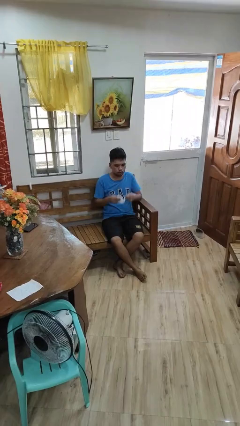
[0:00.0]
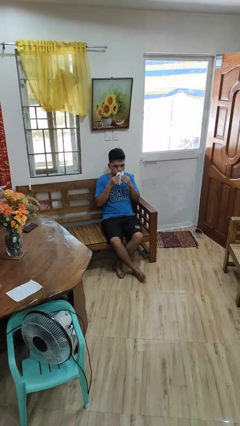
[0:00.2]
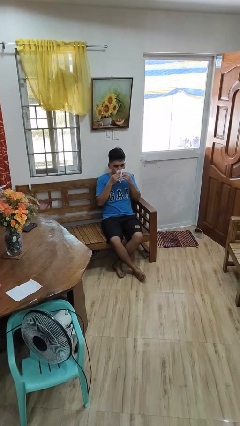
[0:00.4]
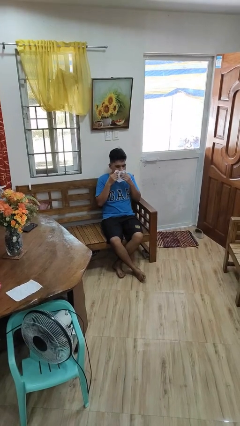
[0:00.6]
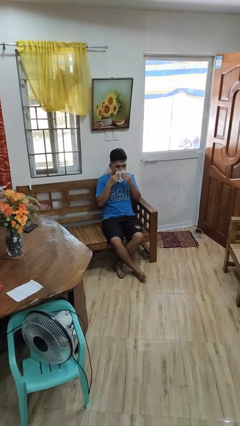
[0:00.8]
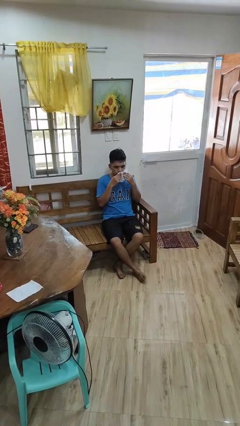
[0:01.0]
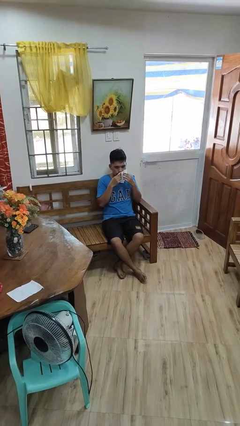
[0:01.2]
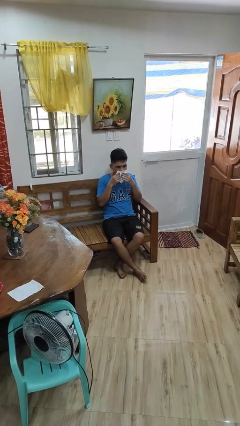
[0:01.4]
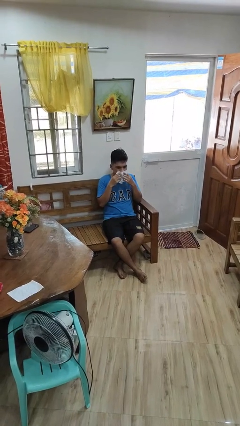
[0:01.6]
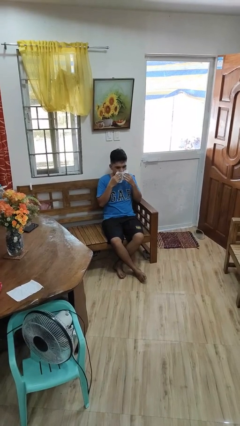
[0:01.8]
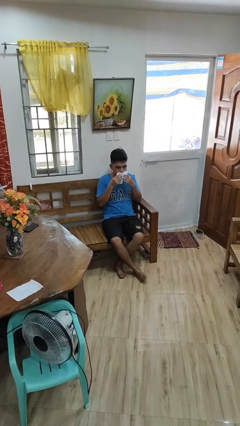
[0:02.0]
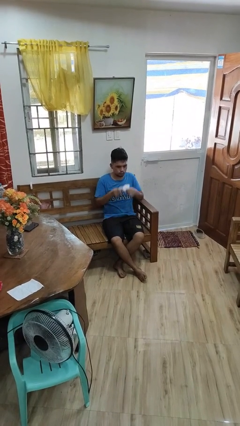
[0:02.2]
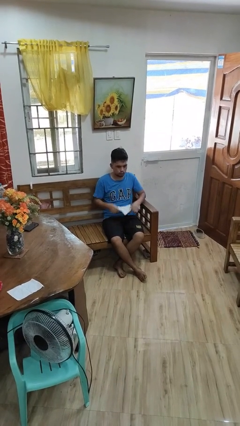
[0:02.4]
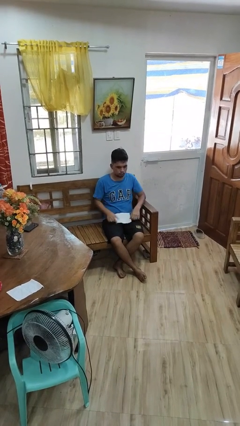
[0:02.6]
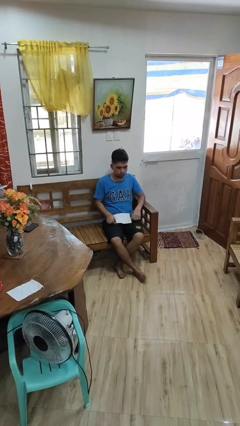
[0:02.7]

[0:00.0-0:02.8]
person wipes mouth with napkin

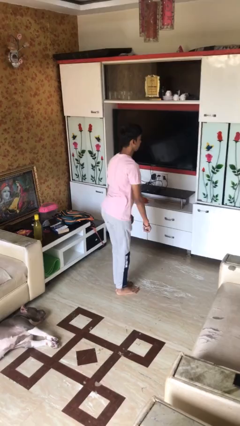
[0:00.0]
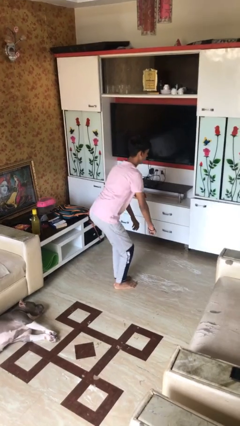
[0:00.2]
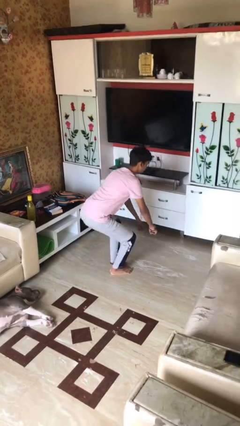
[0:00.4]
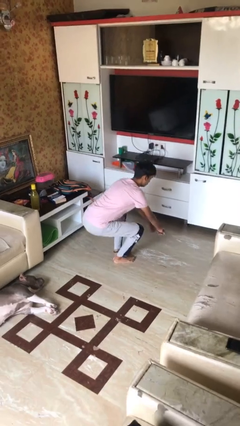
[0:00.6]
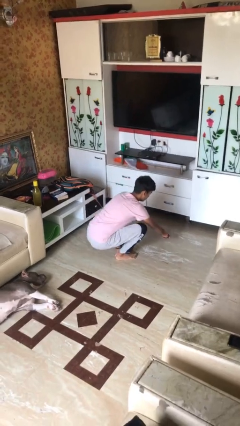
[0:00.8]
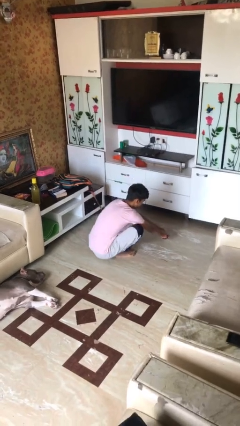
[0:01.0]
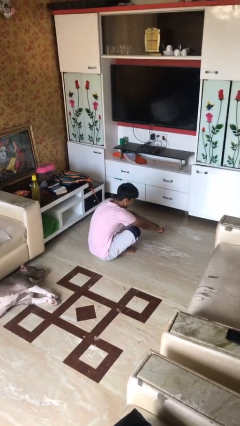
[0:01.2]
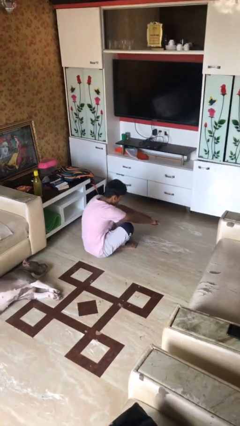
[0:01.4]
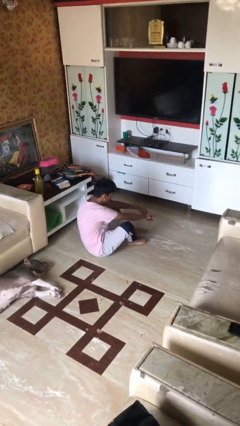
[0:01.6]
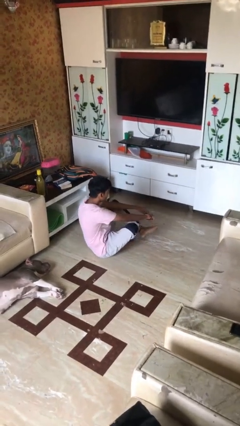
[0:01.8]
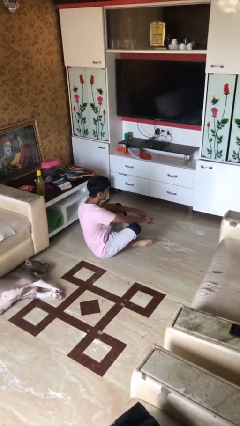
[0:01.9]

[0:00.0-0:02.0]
person sits crisscross

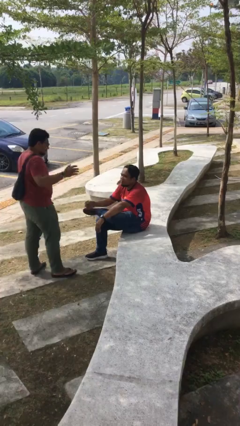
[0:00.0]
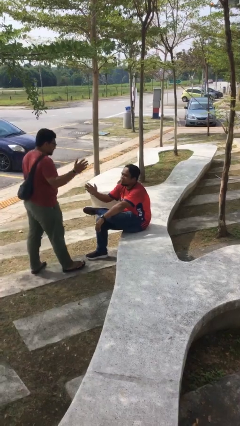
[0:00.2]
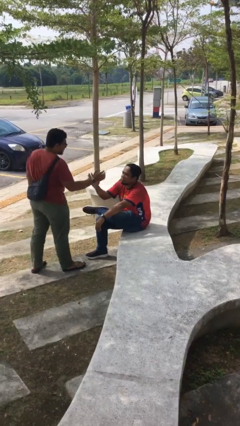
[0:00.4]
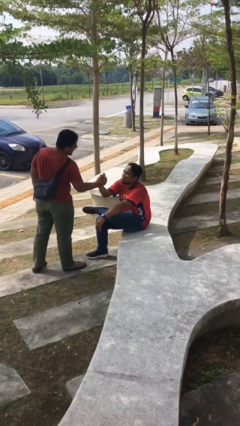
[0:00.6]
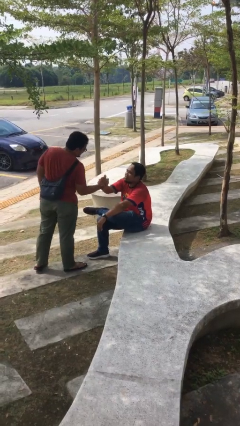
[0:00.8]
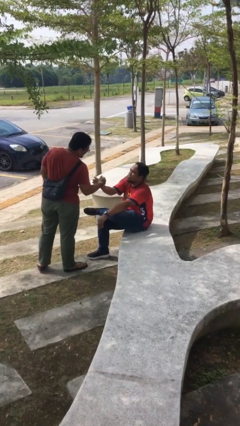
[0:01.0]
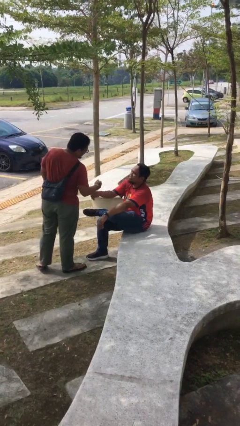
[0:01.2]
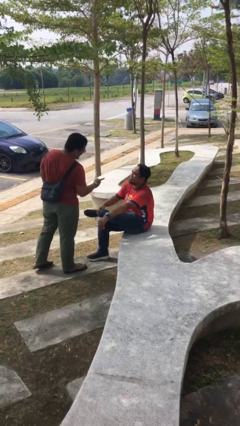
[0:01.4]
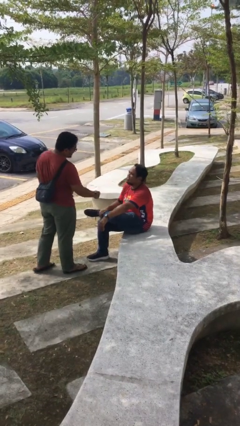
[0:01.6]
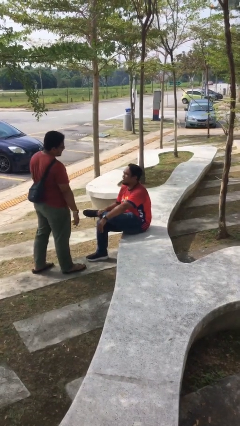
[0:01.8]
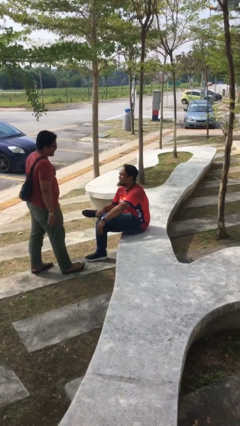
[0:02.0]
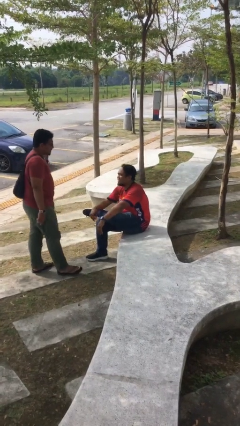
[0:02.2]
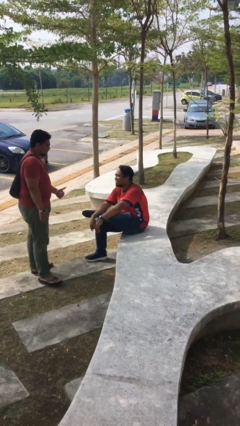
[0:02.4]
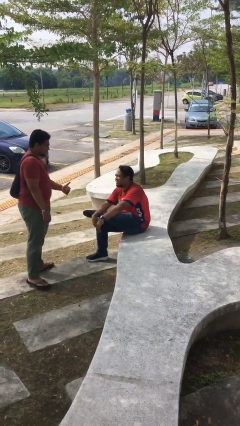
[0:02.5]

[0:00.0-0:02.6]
person shakes hand

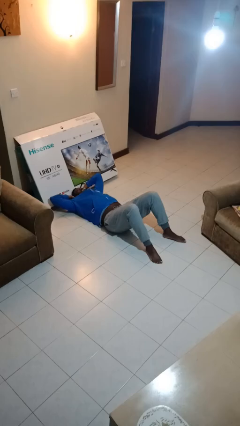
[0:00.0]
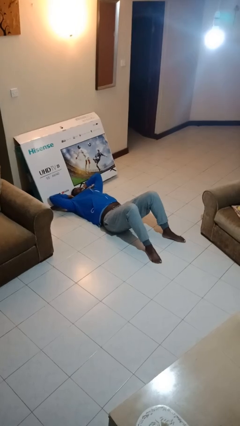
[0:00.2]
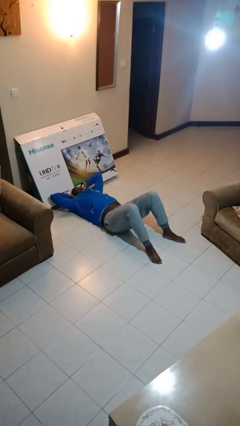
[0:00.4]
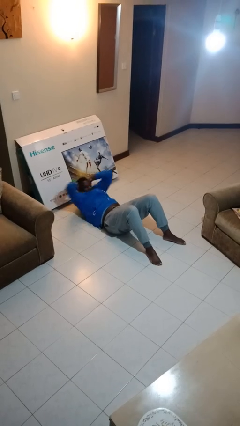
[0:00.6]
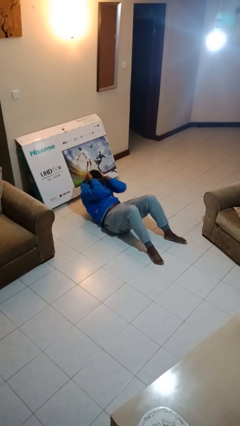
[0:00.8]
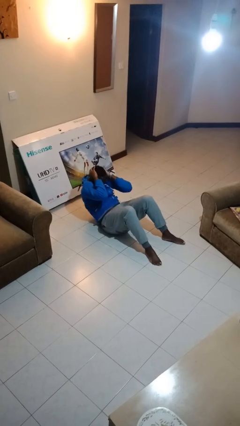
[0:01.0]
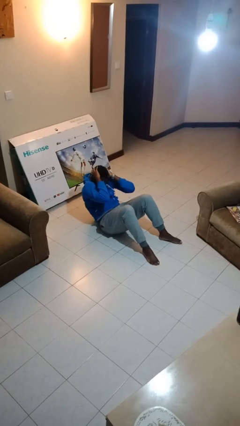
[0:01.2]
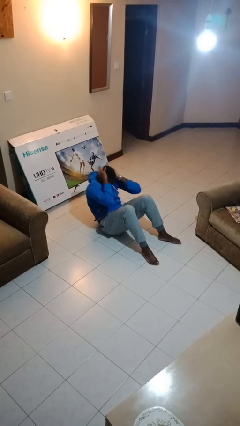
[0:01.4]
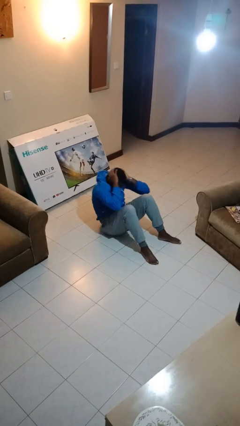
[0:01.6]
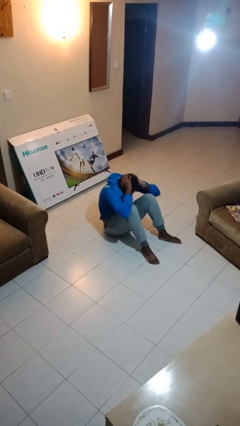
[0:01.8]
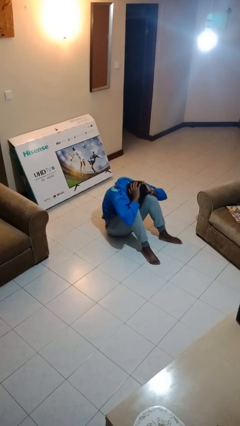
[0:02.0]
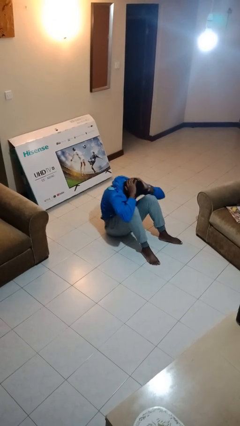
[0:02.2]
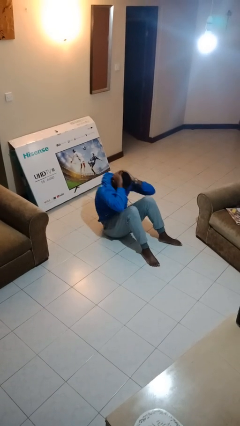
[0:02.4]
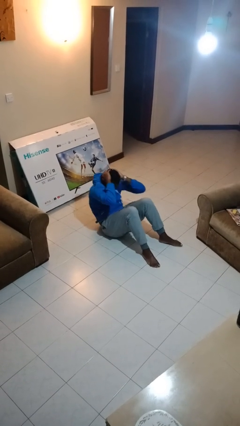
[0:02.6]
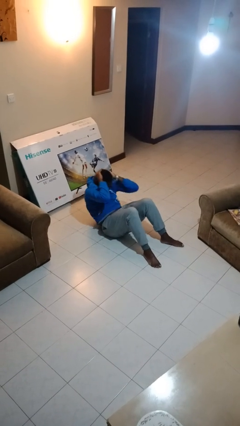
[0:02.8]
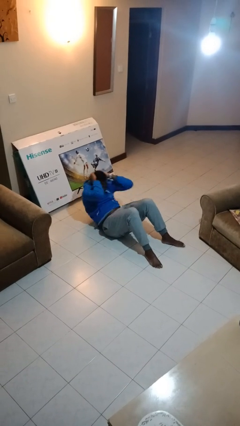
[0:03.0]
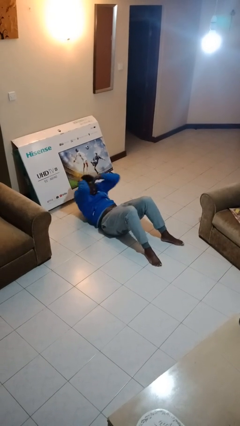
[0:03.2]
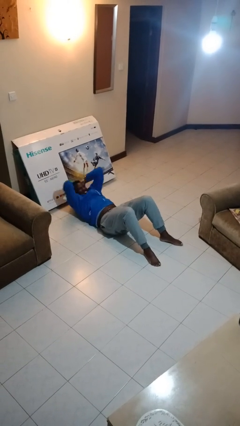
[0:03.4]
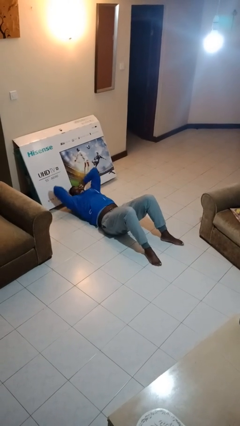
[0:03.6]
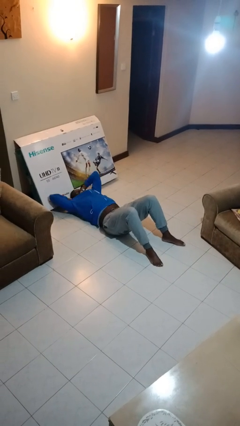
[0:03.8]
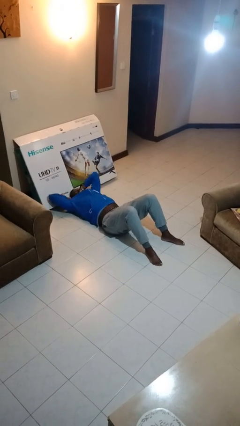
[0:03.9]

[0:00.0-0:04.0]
person exercises with situp

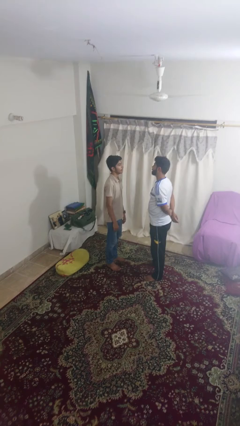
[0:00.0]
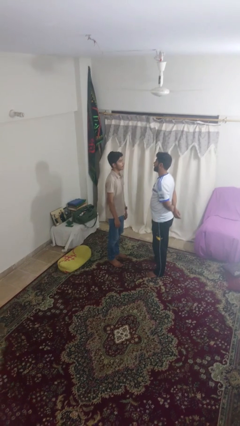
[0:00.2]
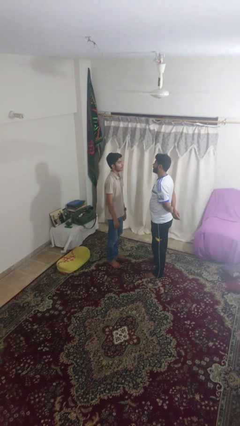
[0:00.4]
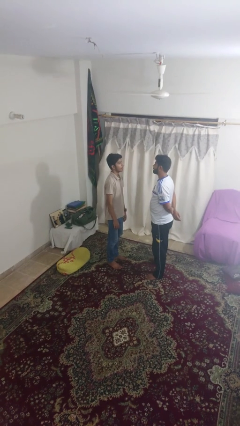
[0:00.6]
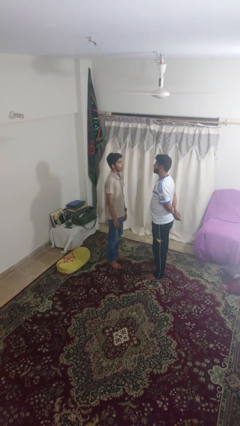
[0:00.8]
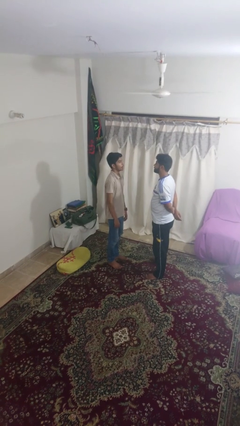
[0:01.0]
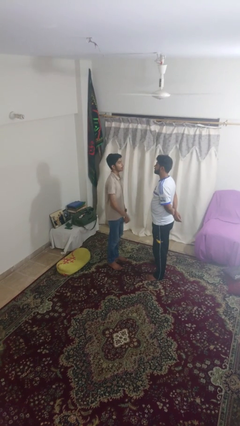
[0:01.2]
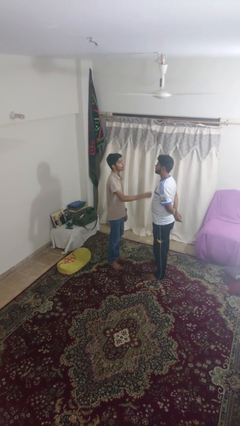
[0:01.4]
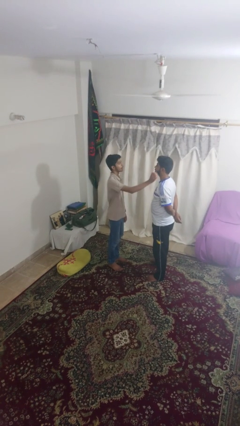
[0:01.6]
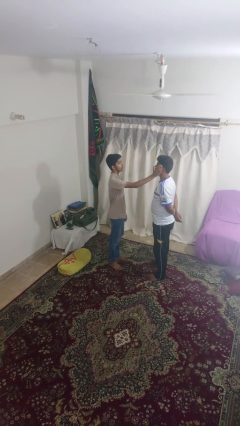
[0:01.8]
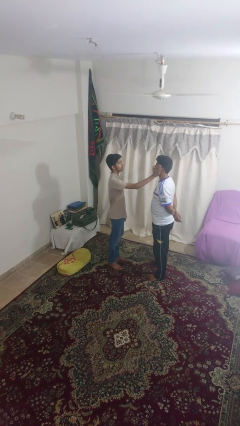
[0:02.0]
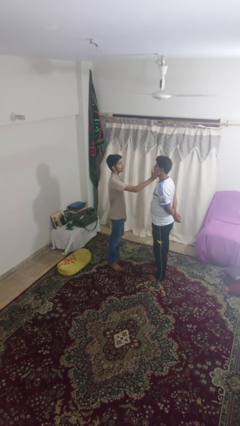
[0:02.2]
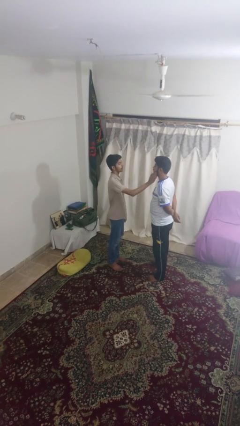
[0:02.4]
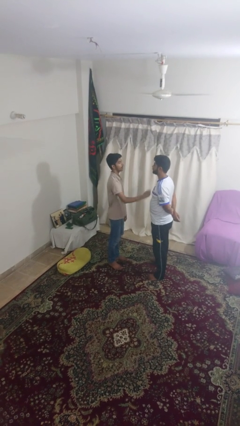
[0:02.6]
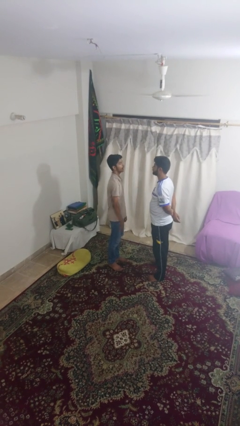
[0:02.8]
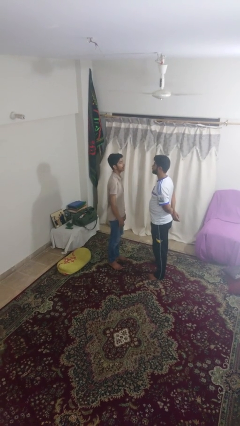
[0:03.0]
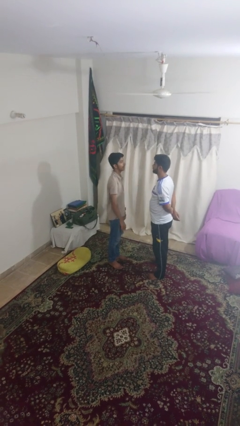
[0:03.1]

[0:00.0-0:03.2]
person touches face of person

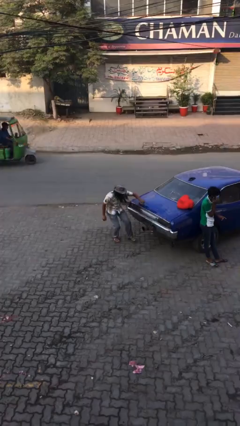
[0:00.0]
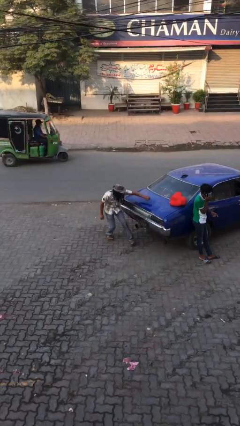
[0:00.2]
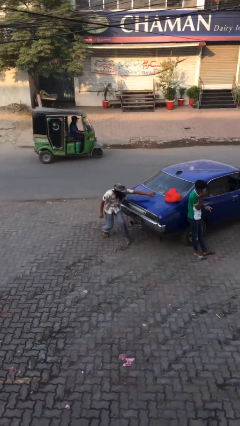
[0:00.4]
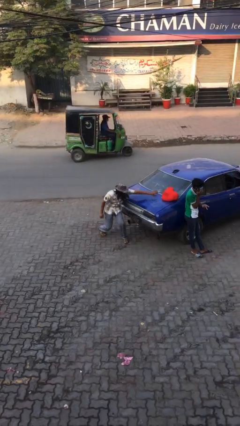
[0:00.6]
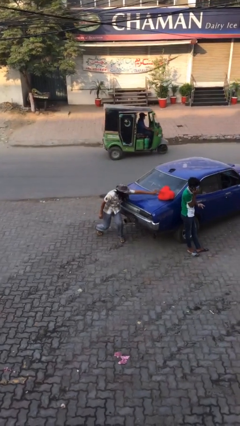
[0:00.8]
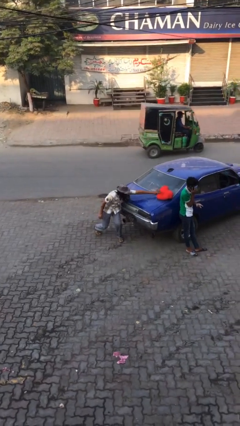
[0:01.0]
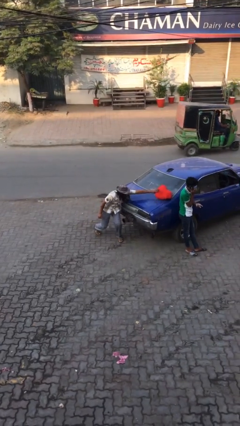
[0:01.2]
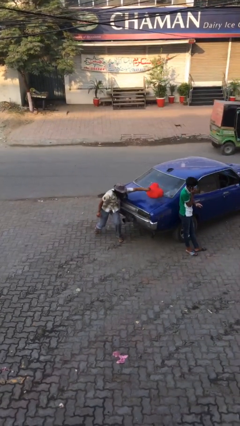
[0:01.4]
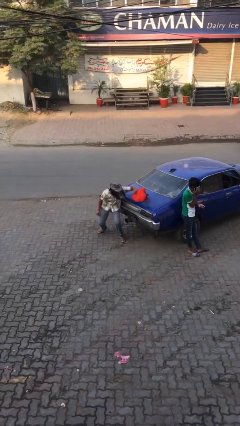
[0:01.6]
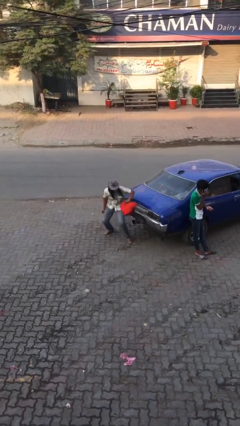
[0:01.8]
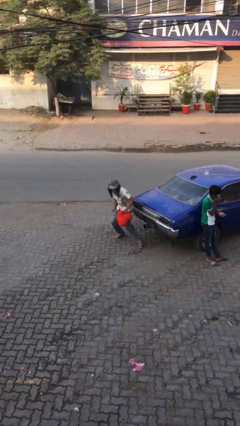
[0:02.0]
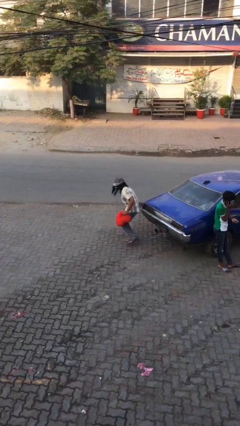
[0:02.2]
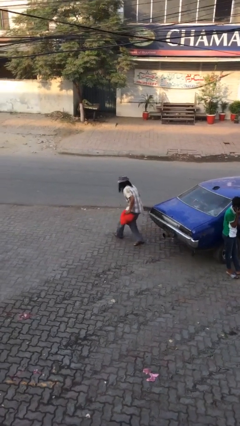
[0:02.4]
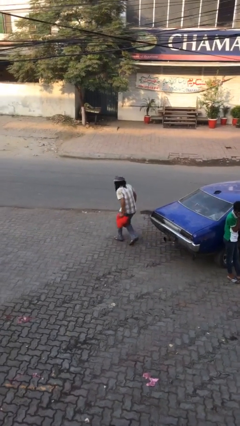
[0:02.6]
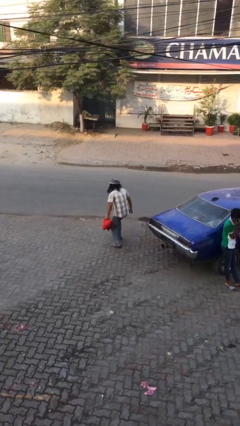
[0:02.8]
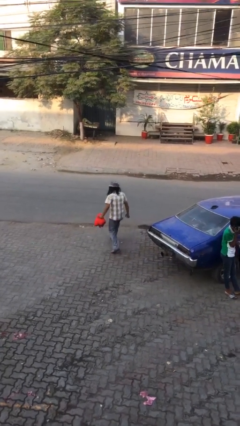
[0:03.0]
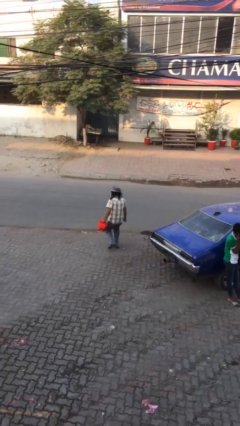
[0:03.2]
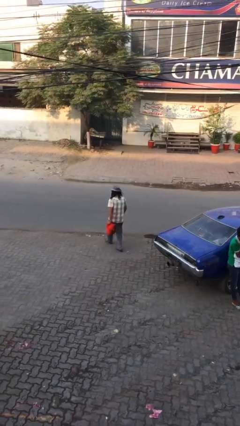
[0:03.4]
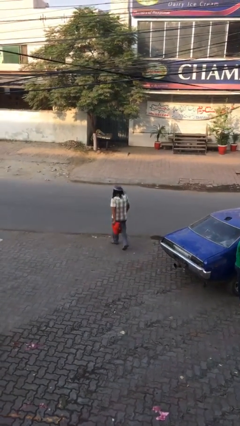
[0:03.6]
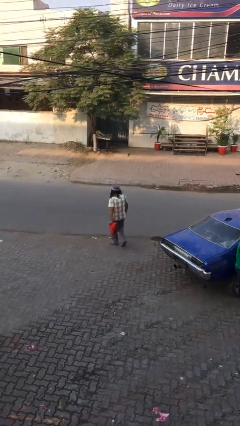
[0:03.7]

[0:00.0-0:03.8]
person steals object from person
